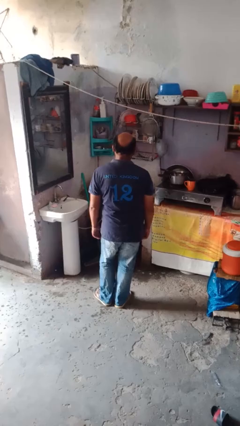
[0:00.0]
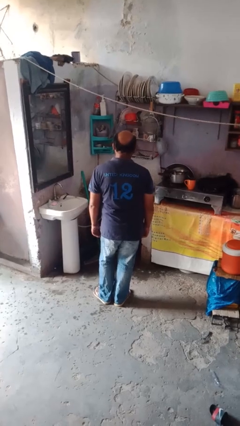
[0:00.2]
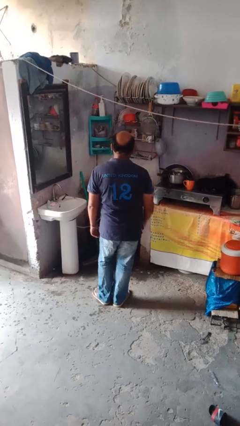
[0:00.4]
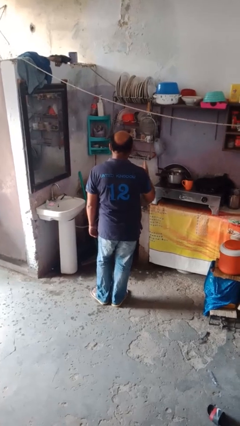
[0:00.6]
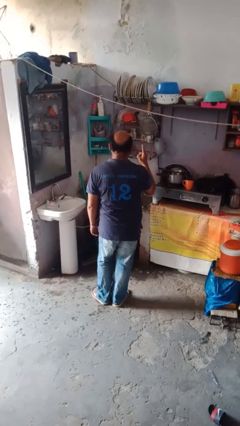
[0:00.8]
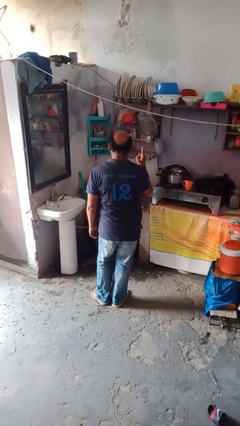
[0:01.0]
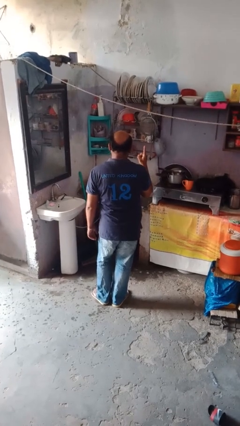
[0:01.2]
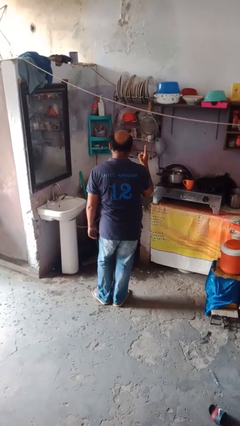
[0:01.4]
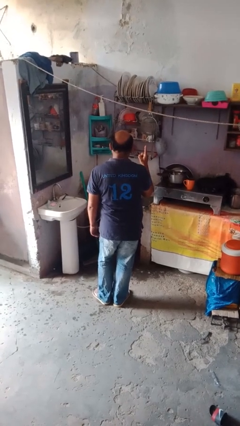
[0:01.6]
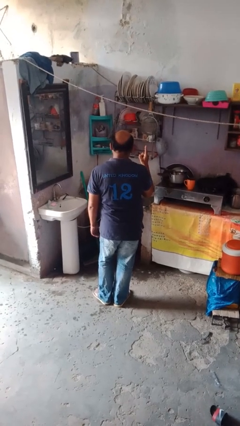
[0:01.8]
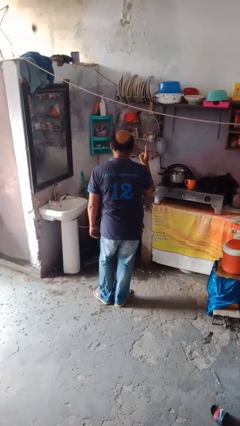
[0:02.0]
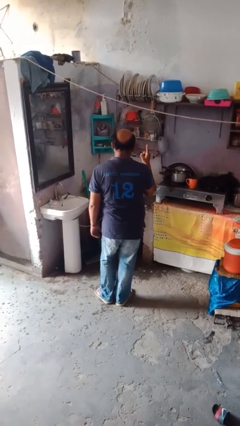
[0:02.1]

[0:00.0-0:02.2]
person gestures number one

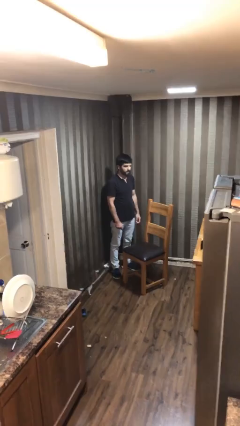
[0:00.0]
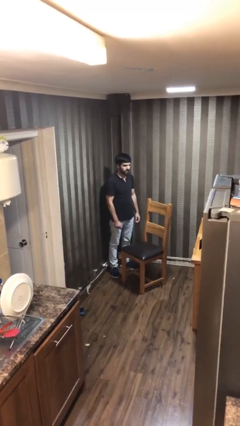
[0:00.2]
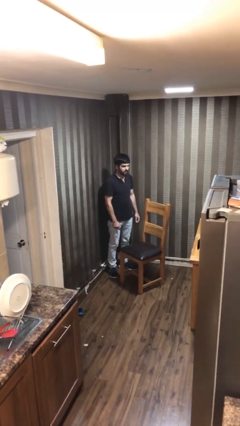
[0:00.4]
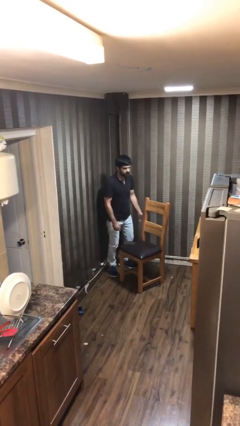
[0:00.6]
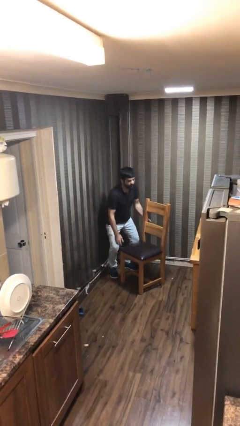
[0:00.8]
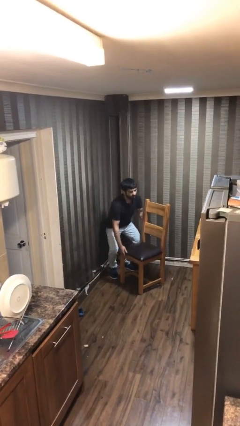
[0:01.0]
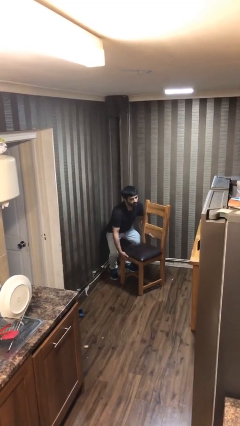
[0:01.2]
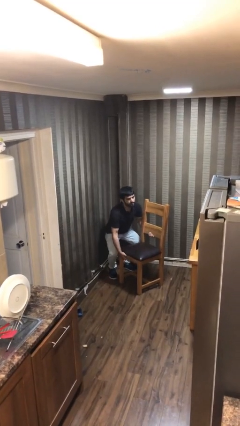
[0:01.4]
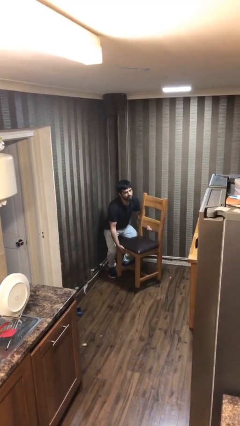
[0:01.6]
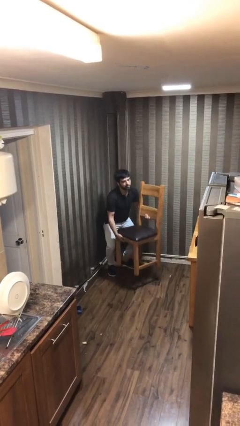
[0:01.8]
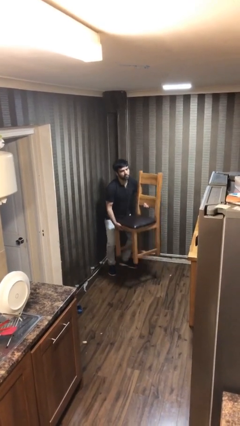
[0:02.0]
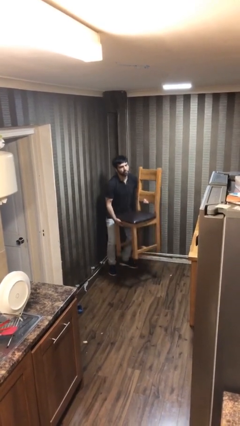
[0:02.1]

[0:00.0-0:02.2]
person picks up object from floor

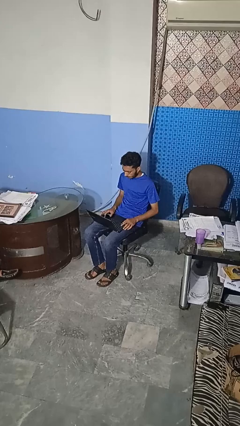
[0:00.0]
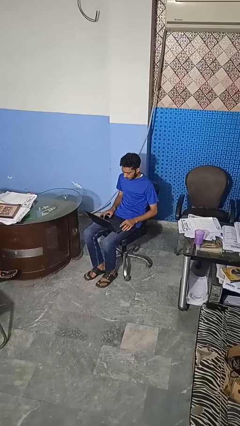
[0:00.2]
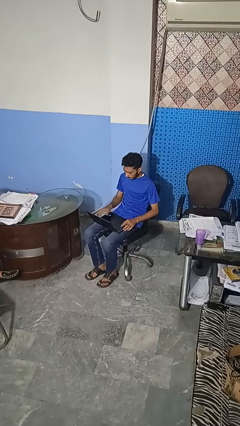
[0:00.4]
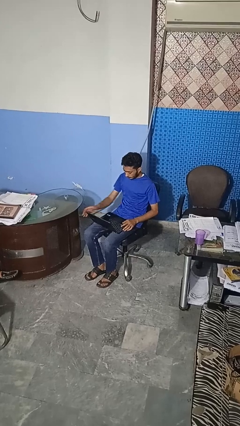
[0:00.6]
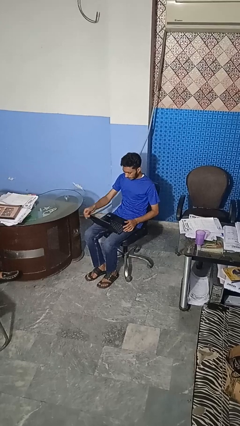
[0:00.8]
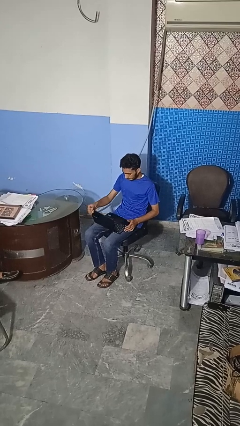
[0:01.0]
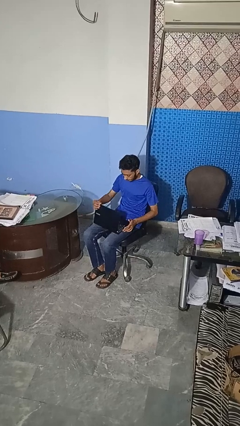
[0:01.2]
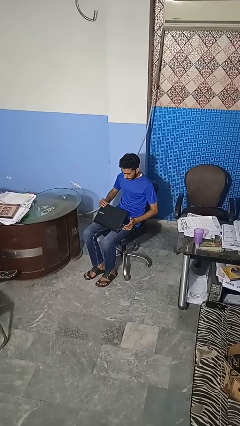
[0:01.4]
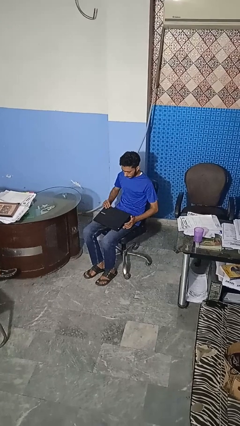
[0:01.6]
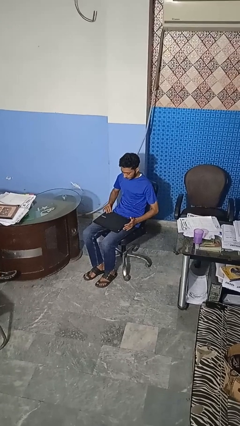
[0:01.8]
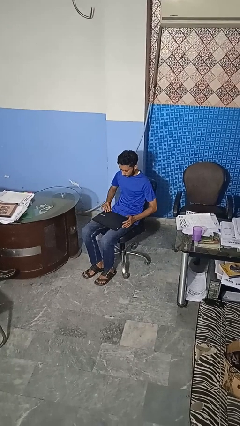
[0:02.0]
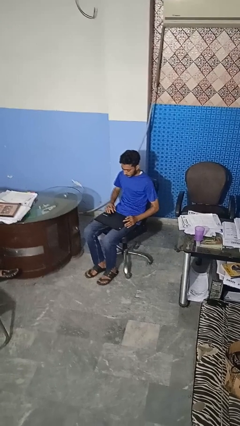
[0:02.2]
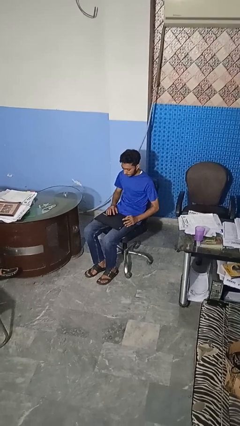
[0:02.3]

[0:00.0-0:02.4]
person closes laptop

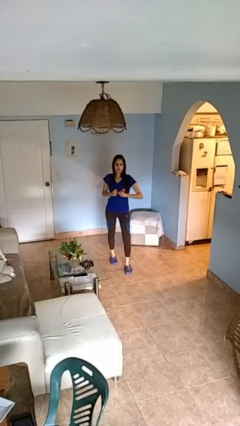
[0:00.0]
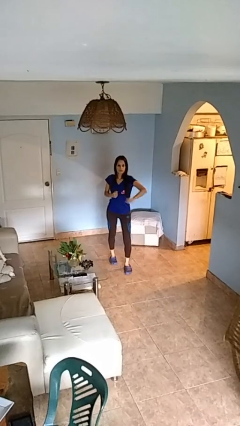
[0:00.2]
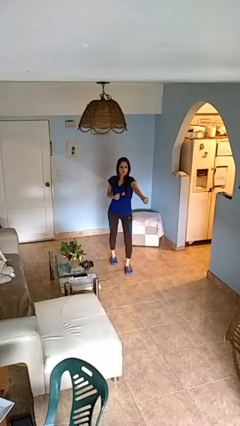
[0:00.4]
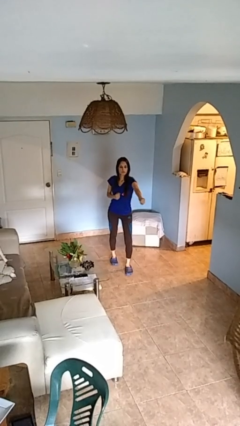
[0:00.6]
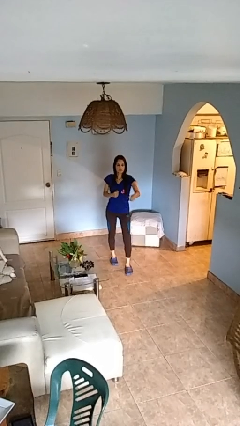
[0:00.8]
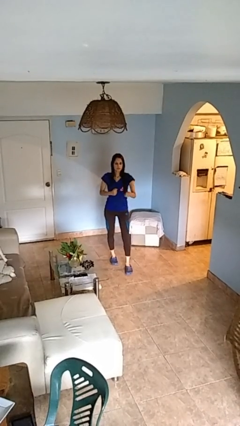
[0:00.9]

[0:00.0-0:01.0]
person karate chop

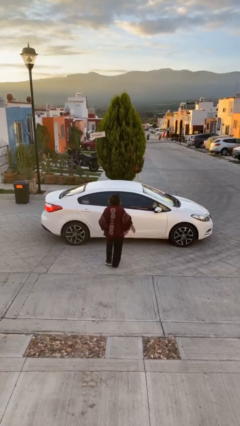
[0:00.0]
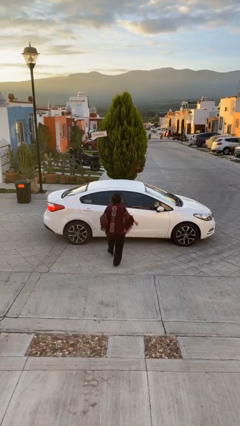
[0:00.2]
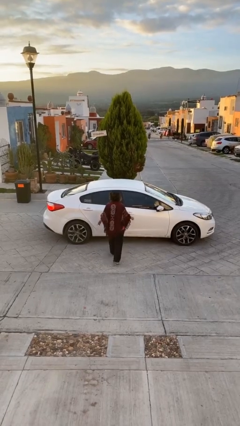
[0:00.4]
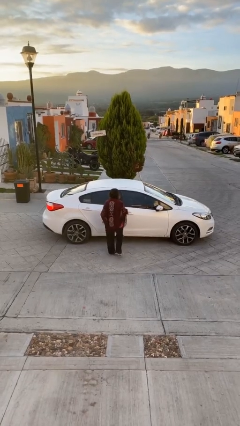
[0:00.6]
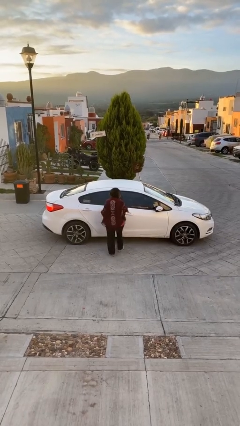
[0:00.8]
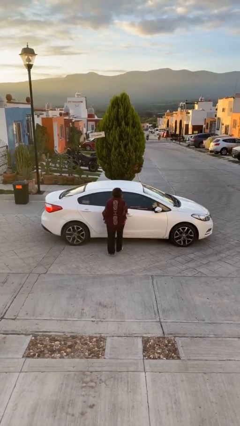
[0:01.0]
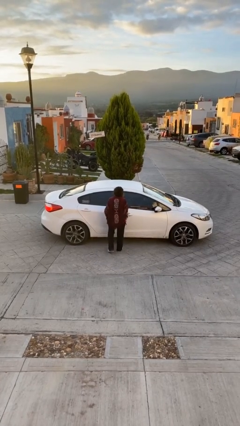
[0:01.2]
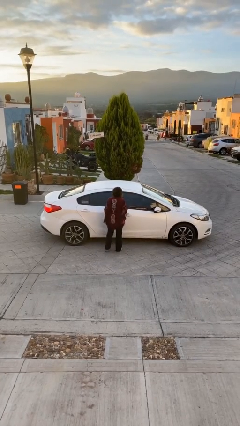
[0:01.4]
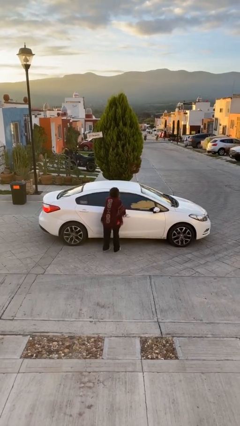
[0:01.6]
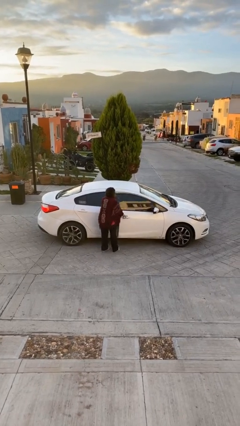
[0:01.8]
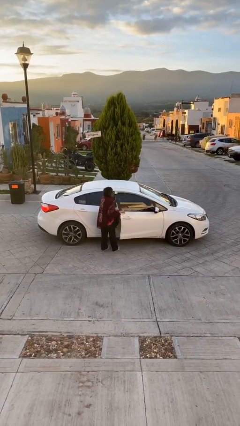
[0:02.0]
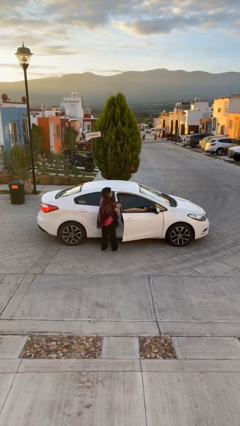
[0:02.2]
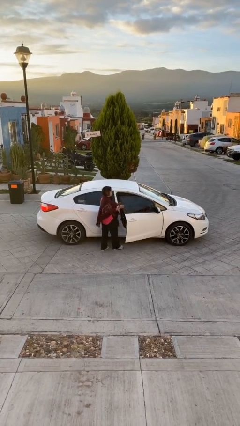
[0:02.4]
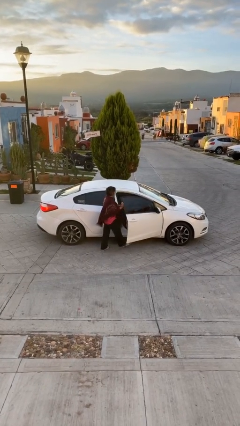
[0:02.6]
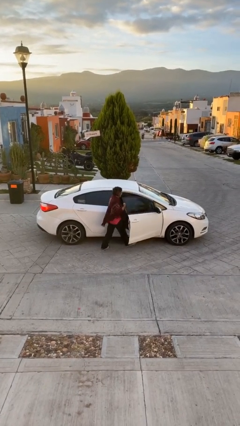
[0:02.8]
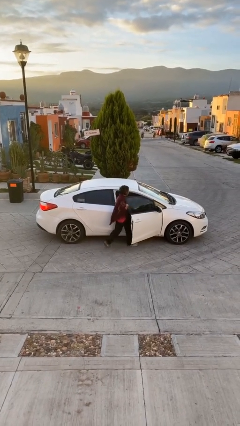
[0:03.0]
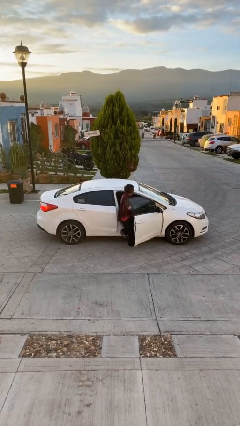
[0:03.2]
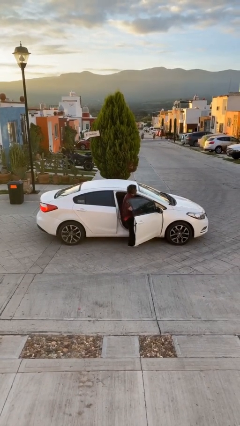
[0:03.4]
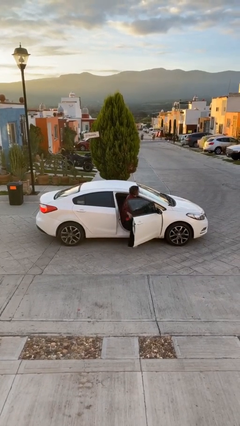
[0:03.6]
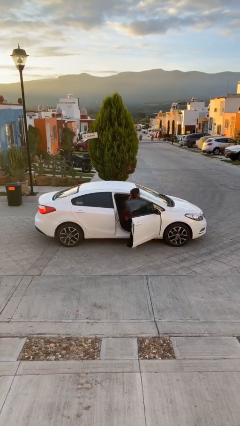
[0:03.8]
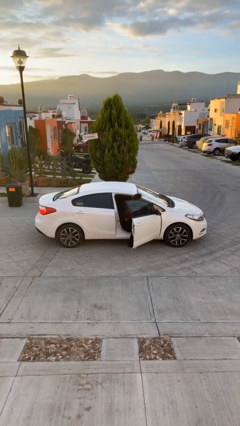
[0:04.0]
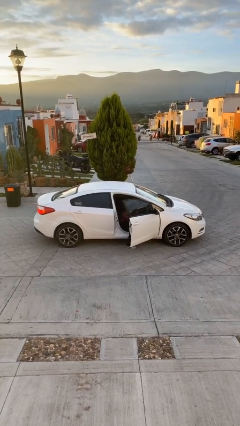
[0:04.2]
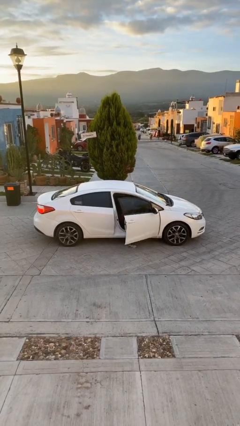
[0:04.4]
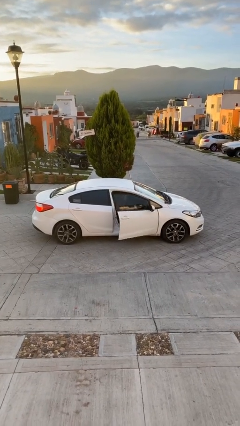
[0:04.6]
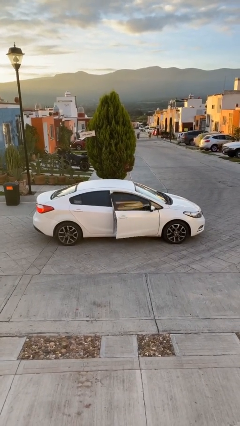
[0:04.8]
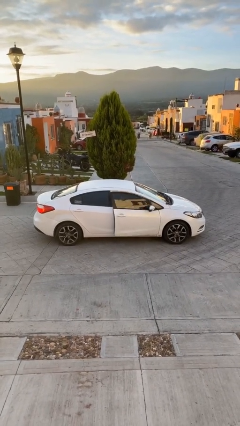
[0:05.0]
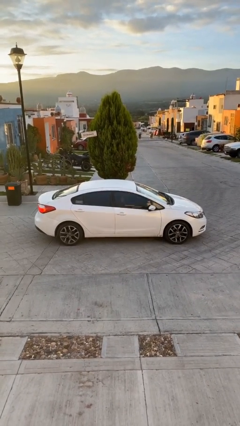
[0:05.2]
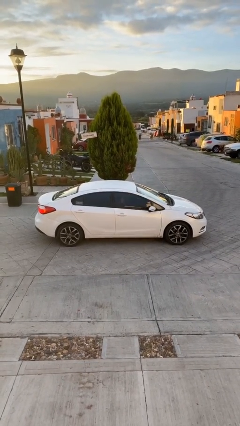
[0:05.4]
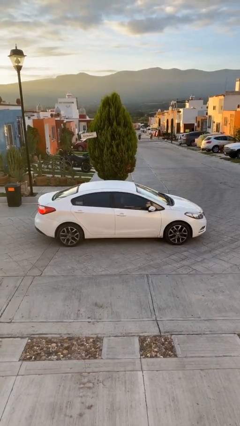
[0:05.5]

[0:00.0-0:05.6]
car picks up person

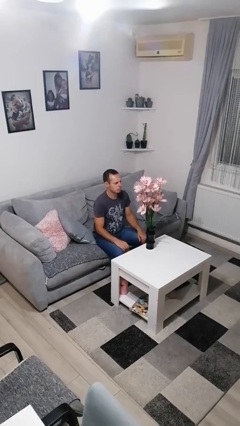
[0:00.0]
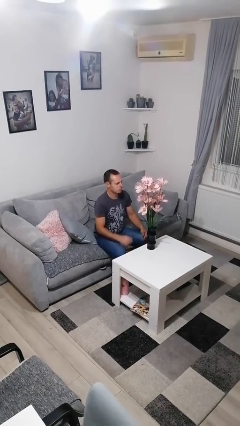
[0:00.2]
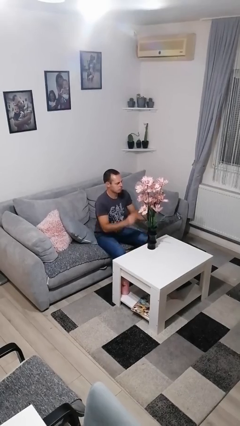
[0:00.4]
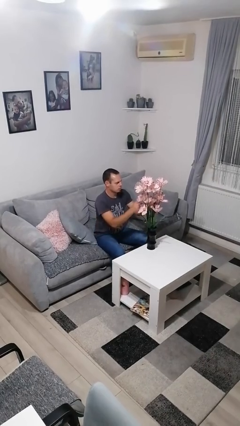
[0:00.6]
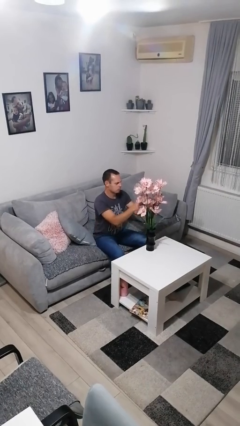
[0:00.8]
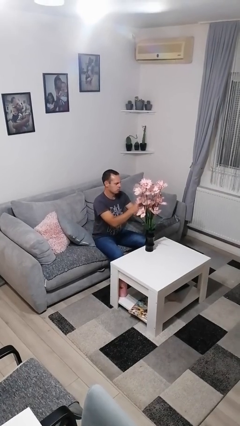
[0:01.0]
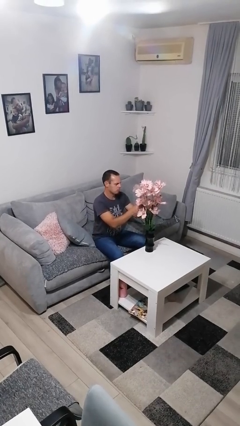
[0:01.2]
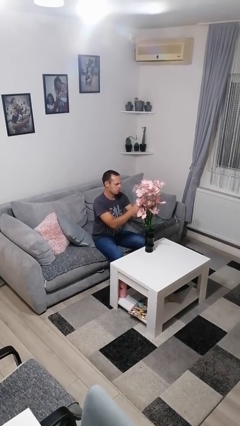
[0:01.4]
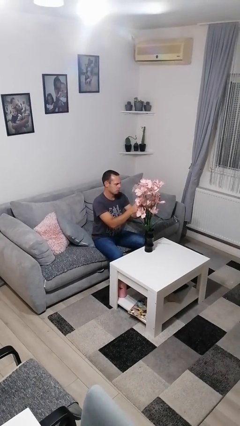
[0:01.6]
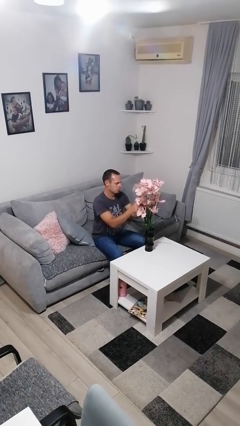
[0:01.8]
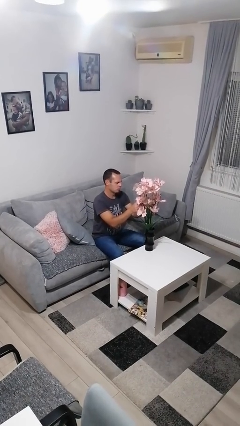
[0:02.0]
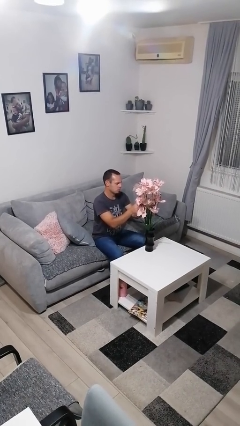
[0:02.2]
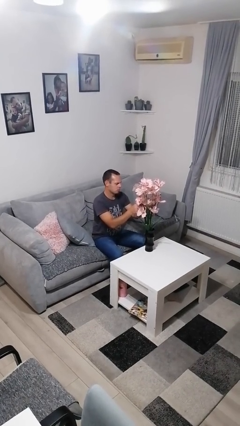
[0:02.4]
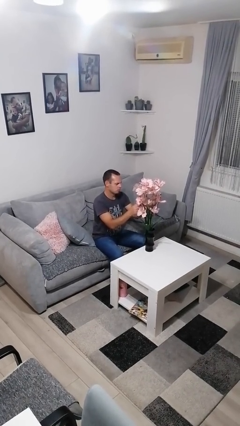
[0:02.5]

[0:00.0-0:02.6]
person arranges flowers in vase

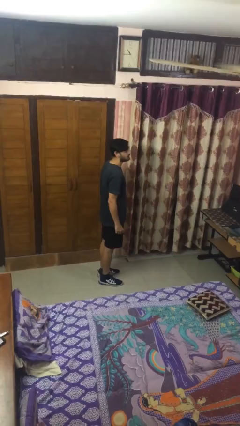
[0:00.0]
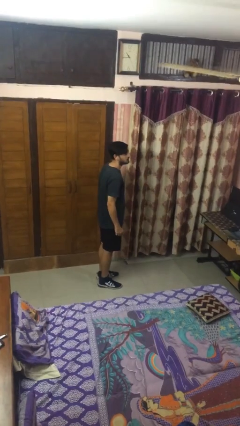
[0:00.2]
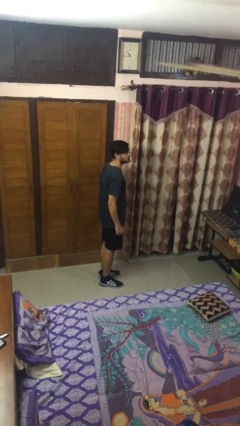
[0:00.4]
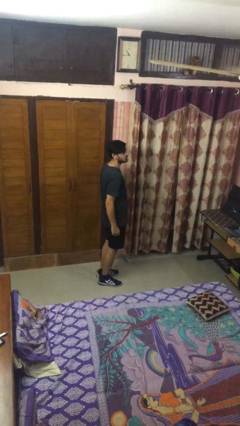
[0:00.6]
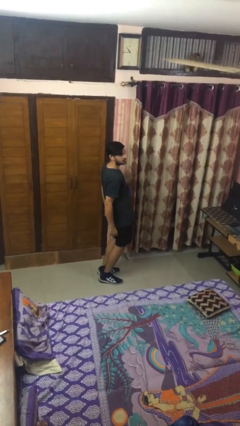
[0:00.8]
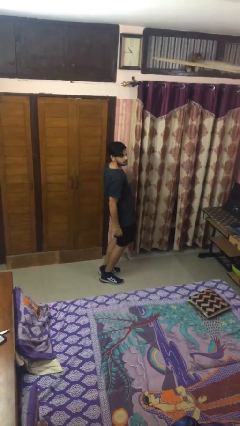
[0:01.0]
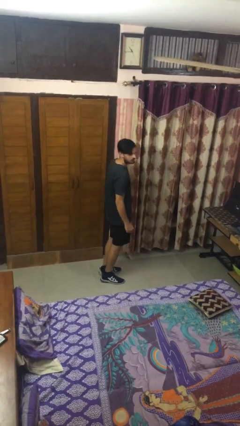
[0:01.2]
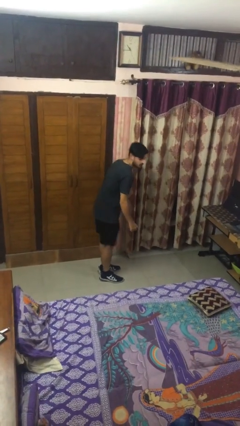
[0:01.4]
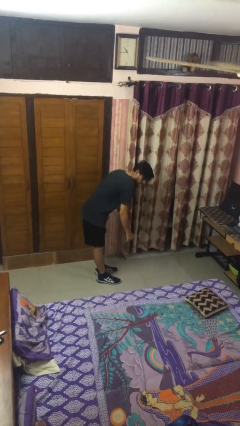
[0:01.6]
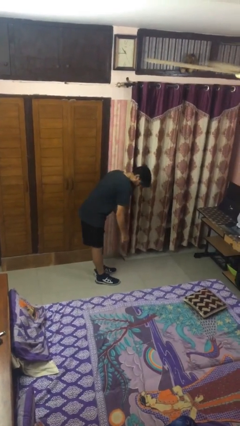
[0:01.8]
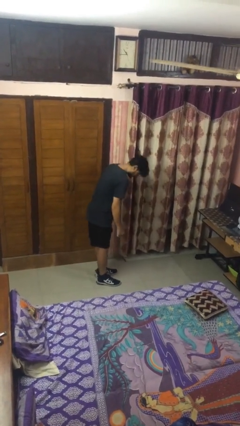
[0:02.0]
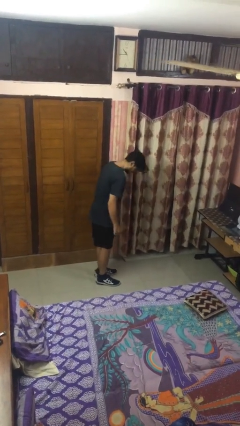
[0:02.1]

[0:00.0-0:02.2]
person wiggles hips
